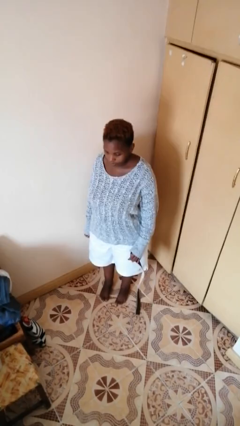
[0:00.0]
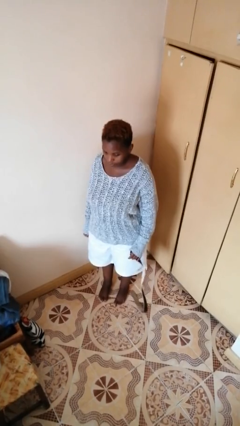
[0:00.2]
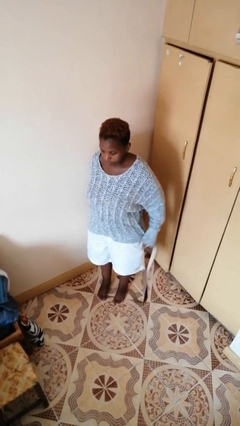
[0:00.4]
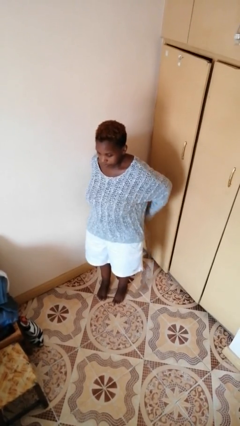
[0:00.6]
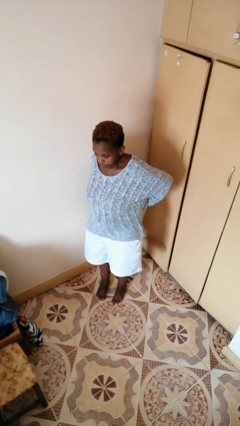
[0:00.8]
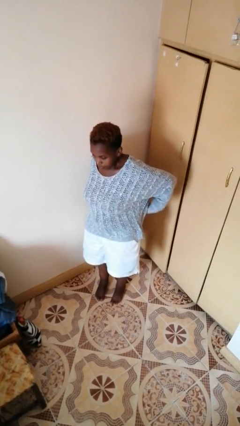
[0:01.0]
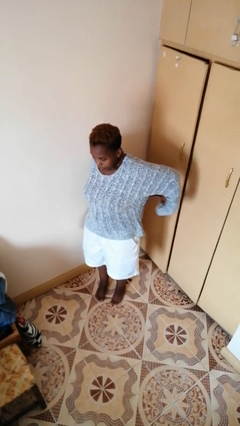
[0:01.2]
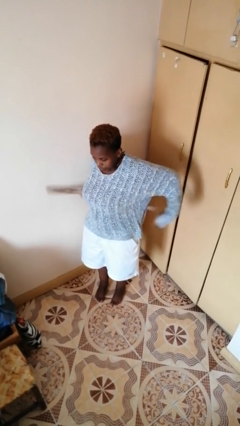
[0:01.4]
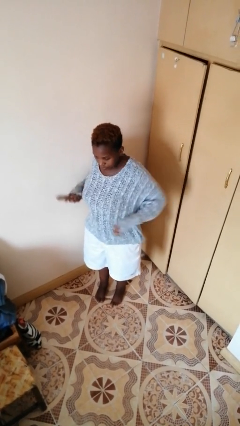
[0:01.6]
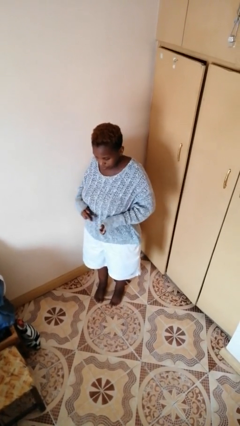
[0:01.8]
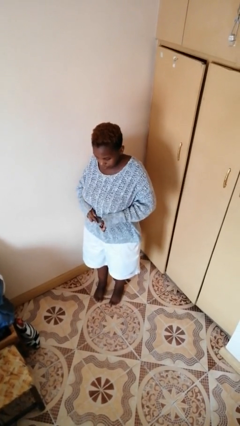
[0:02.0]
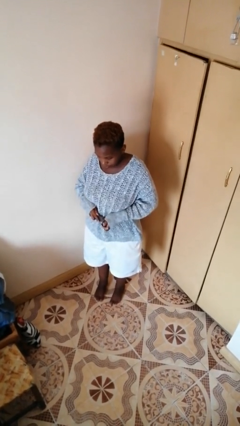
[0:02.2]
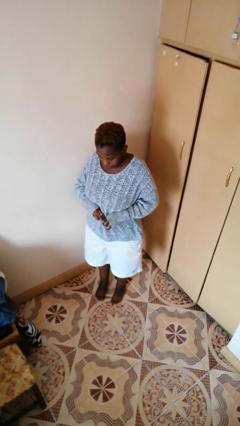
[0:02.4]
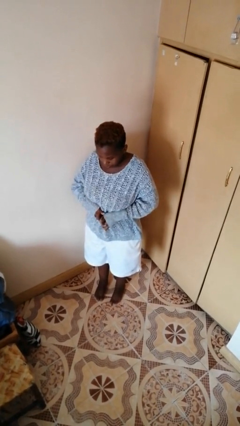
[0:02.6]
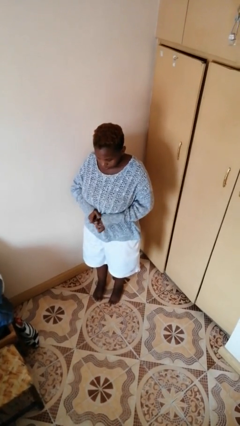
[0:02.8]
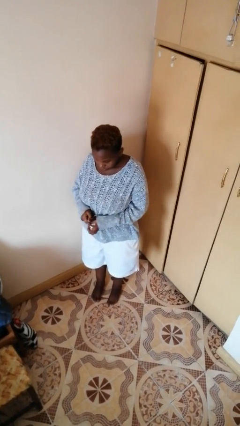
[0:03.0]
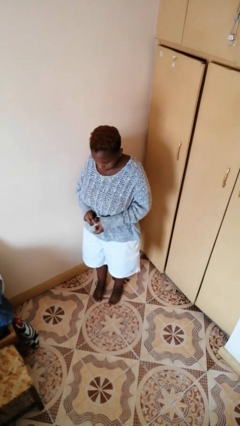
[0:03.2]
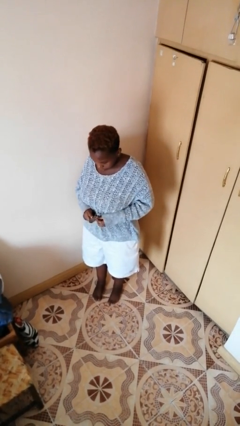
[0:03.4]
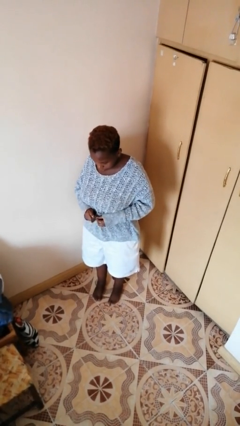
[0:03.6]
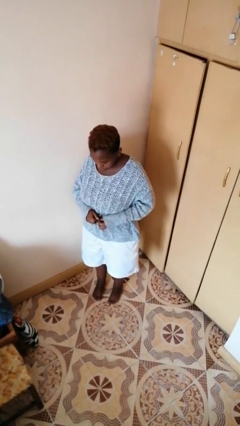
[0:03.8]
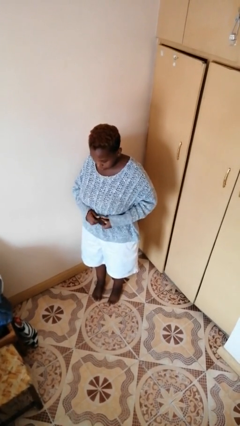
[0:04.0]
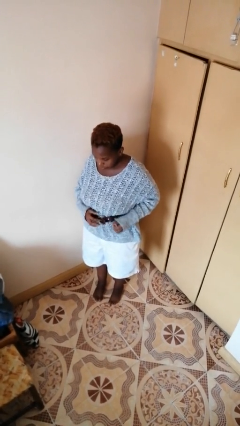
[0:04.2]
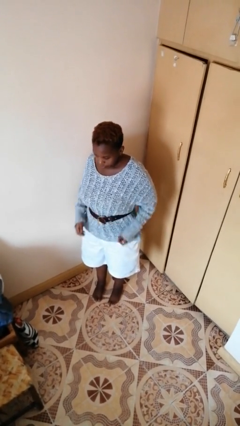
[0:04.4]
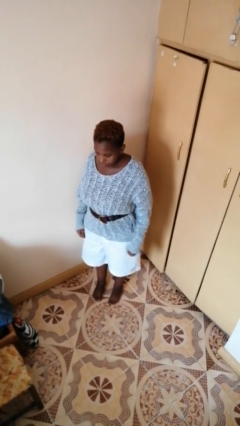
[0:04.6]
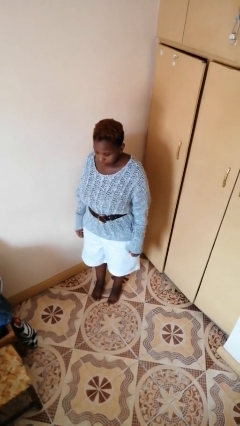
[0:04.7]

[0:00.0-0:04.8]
person puts on belt

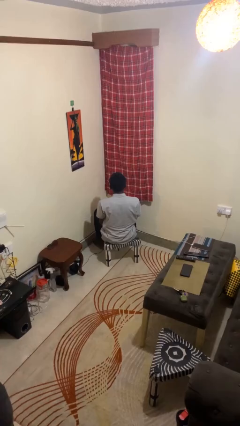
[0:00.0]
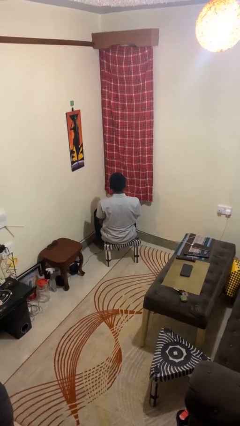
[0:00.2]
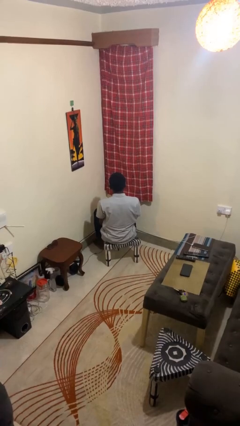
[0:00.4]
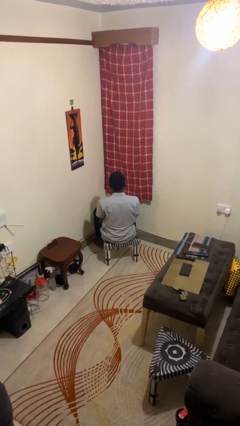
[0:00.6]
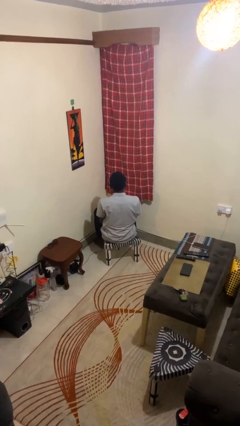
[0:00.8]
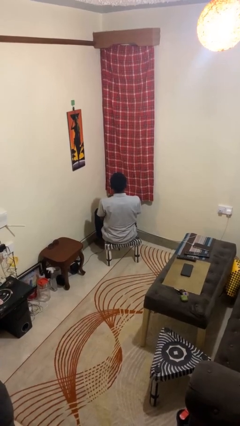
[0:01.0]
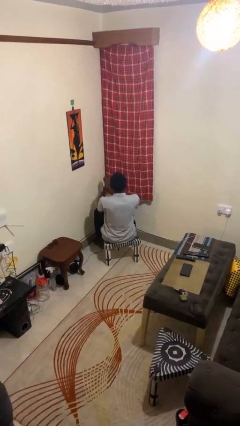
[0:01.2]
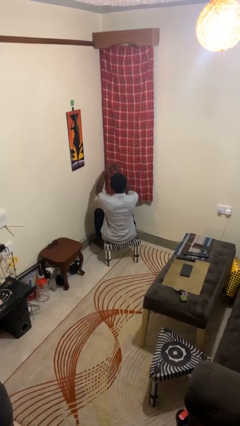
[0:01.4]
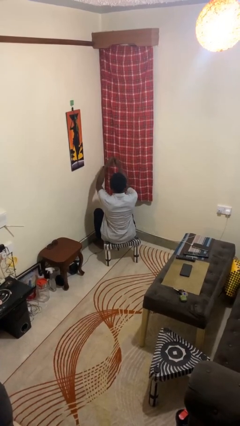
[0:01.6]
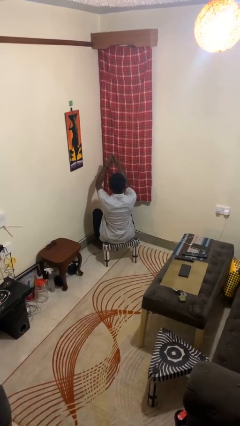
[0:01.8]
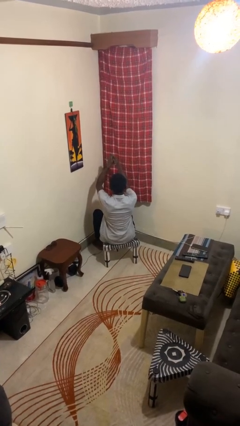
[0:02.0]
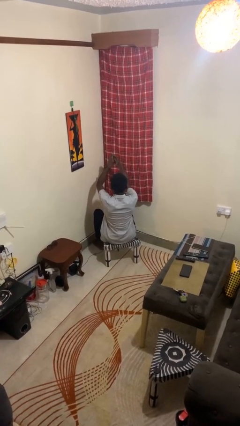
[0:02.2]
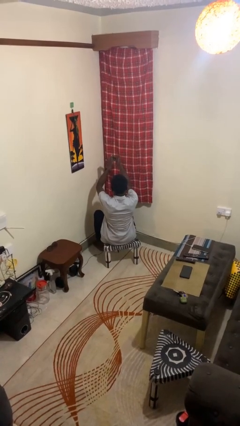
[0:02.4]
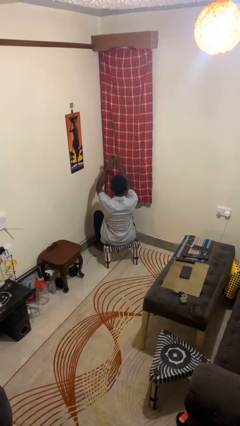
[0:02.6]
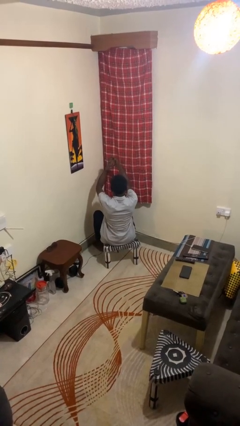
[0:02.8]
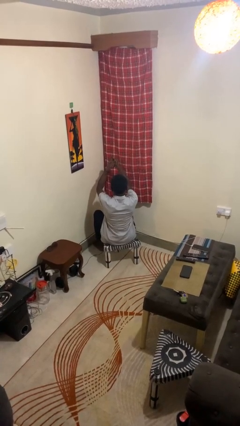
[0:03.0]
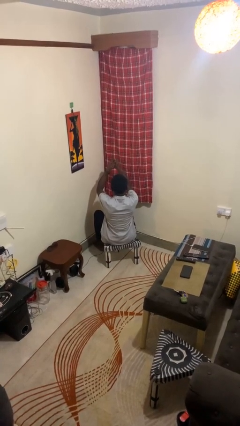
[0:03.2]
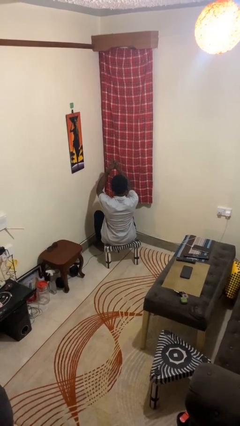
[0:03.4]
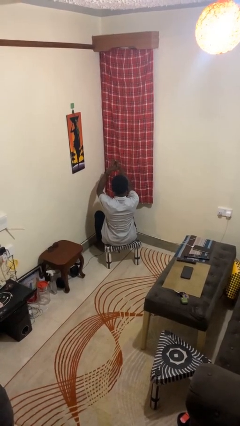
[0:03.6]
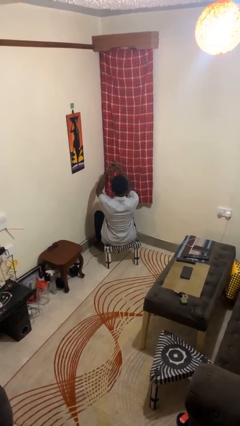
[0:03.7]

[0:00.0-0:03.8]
person cracks knuckles

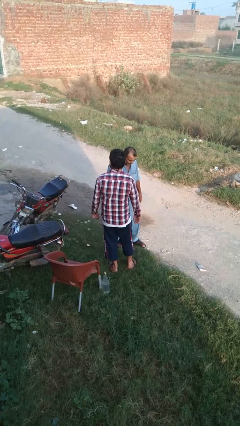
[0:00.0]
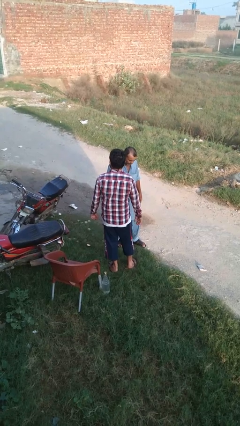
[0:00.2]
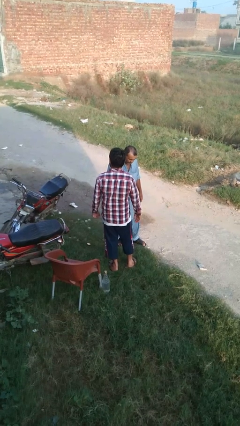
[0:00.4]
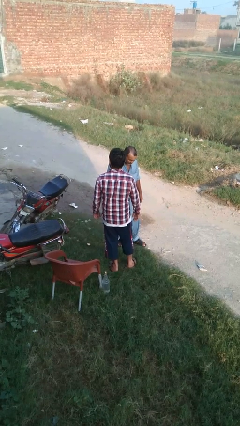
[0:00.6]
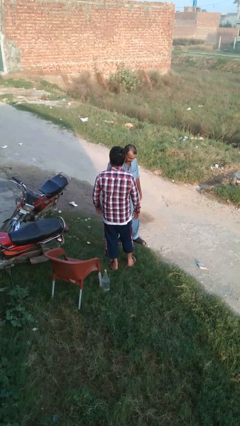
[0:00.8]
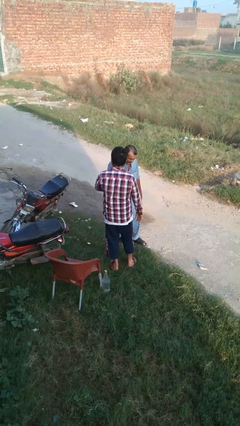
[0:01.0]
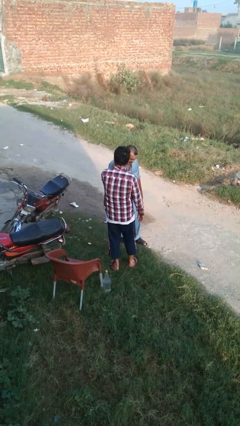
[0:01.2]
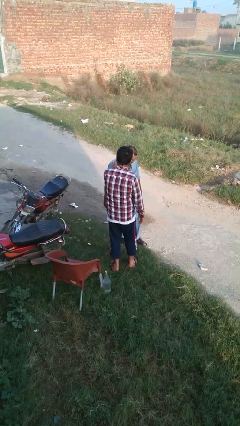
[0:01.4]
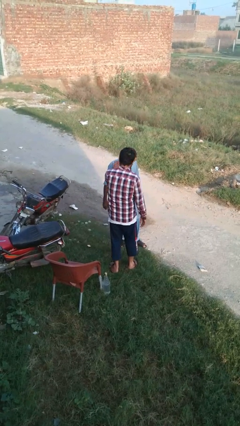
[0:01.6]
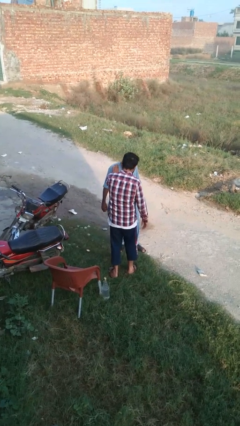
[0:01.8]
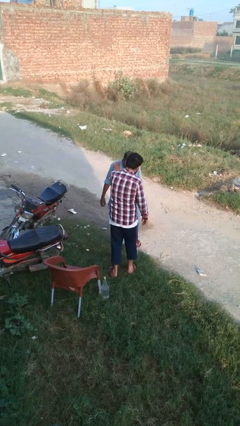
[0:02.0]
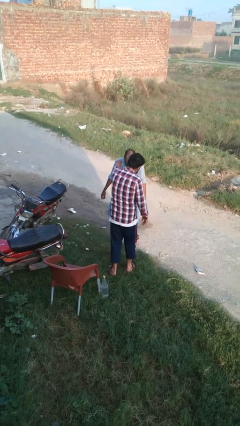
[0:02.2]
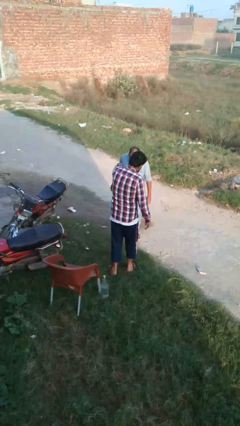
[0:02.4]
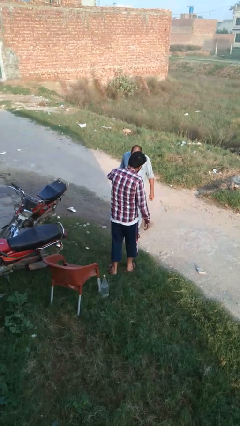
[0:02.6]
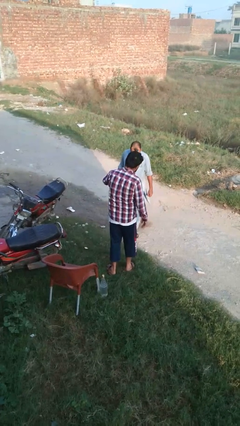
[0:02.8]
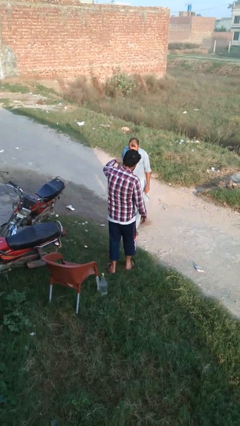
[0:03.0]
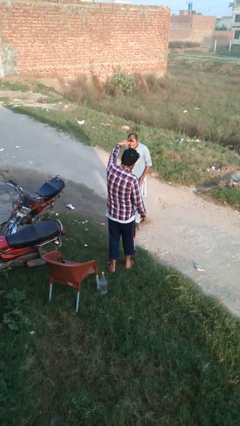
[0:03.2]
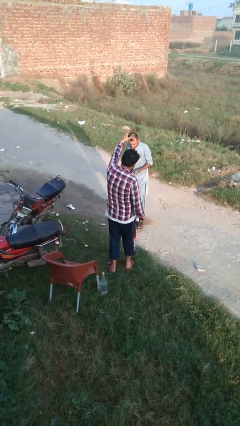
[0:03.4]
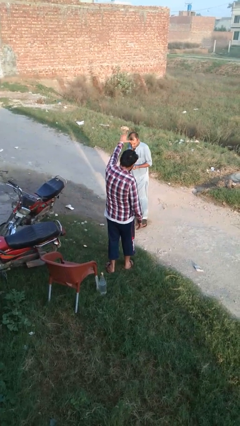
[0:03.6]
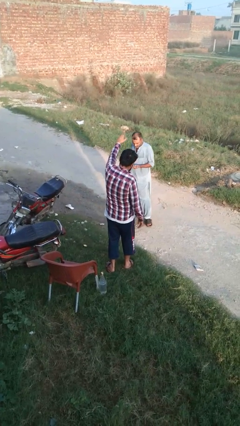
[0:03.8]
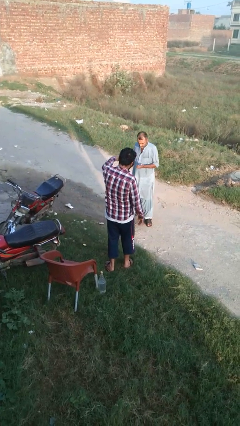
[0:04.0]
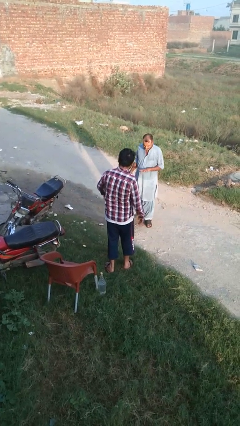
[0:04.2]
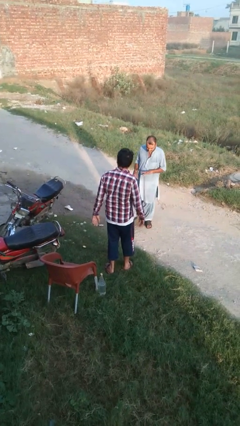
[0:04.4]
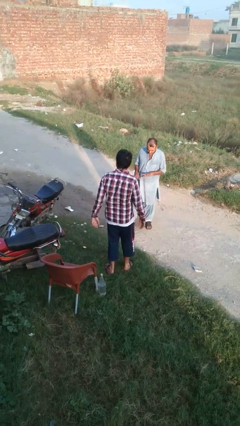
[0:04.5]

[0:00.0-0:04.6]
person shoves person

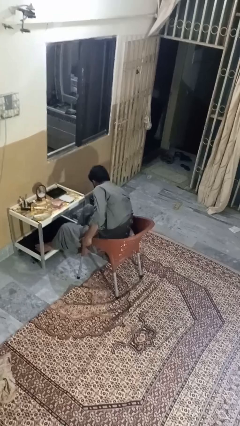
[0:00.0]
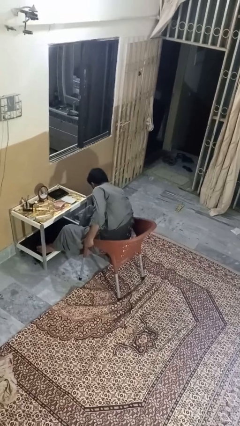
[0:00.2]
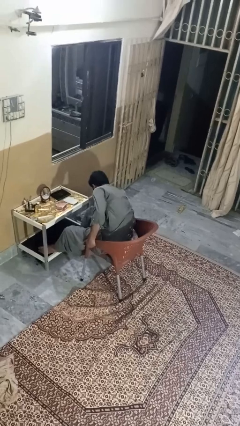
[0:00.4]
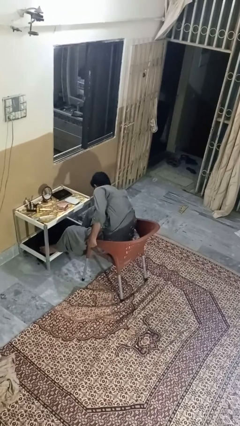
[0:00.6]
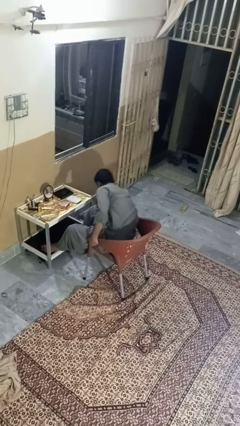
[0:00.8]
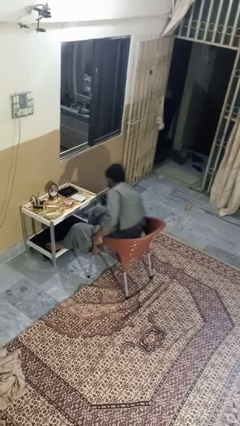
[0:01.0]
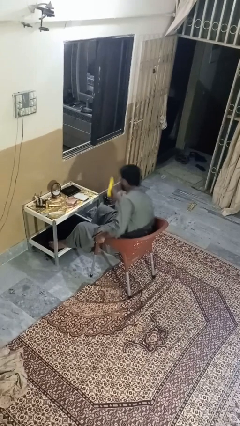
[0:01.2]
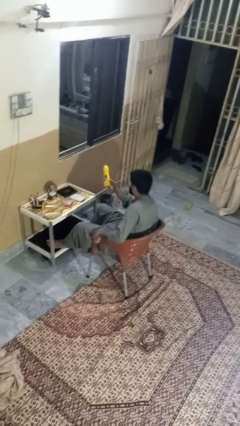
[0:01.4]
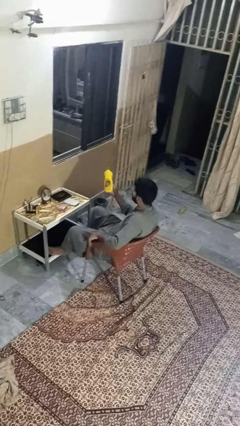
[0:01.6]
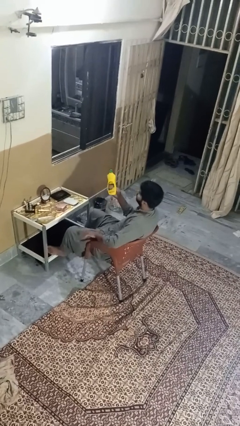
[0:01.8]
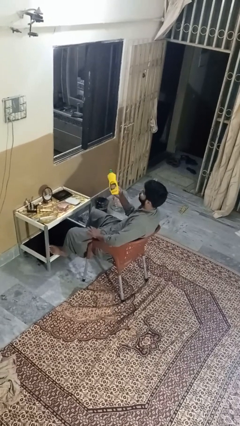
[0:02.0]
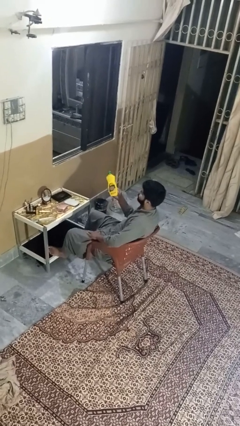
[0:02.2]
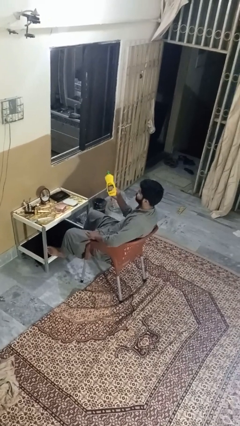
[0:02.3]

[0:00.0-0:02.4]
person picks up object from floor

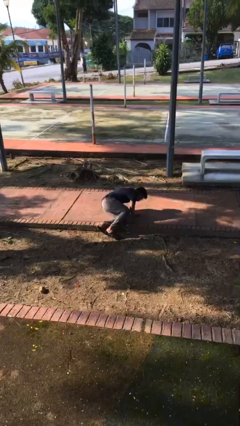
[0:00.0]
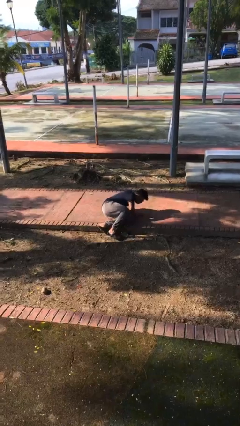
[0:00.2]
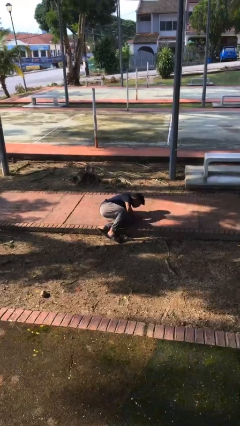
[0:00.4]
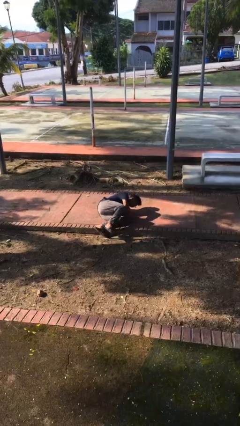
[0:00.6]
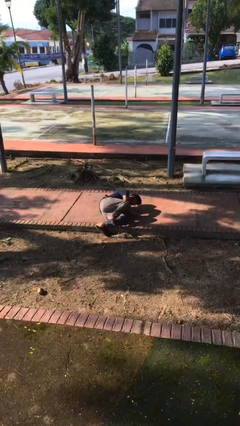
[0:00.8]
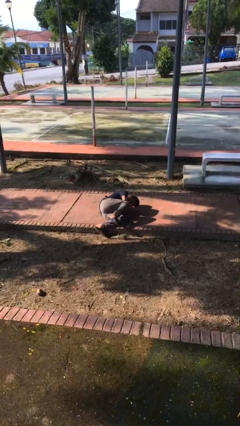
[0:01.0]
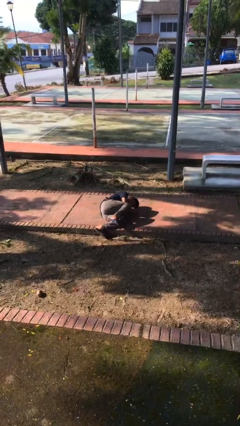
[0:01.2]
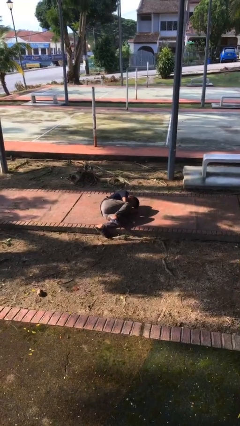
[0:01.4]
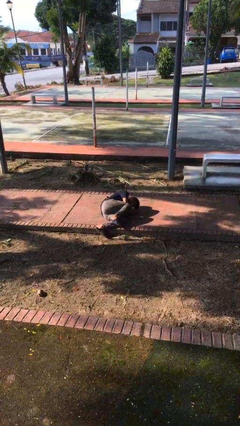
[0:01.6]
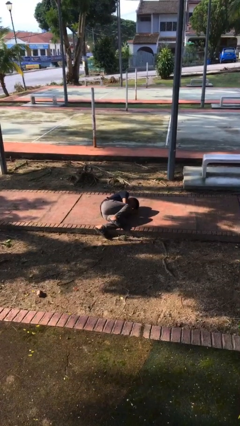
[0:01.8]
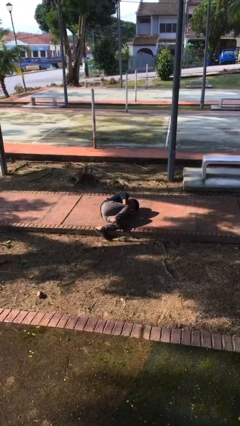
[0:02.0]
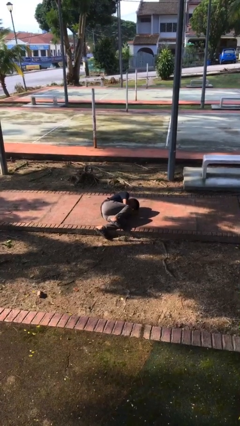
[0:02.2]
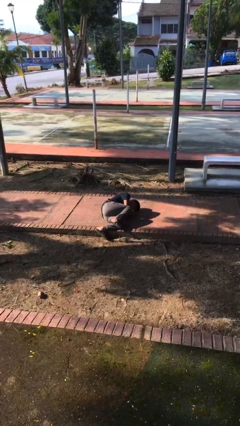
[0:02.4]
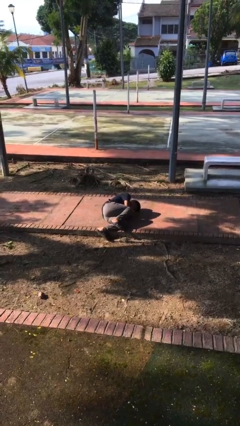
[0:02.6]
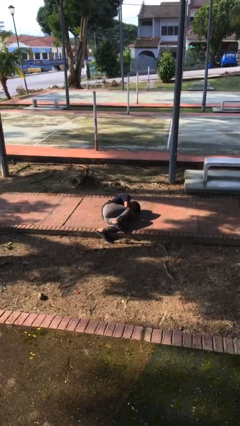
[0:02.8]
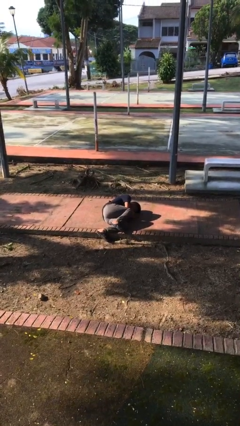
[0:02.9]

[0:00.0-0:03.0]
person lies down on floor
